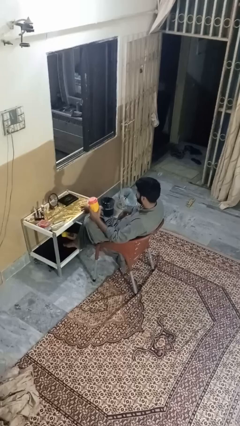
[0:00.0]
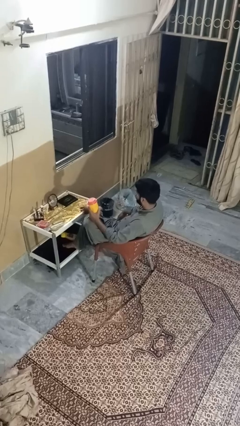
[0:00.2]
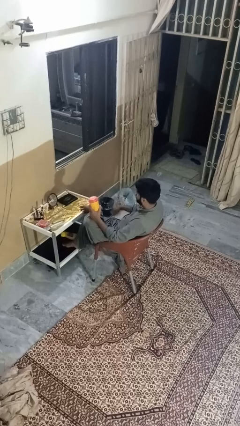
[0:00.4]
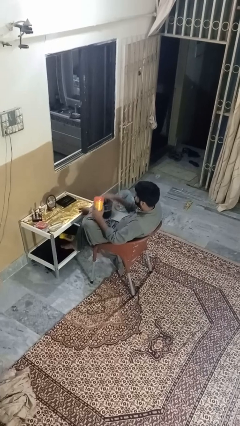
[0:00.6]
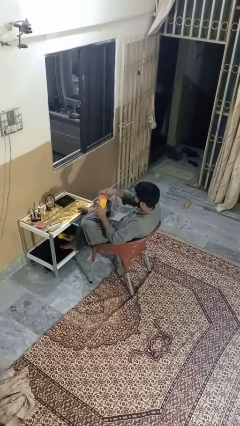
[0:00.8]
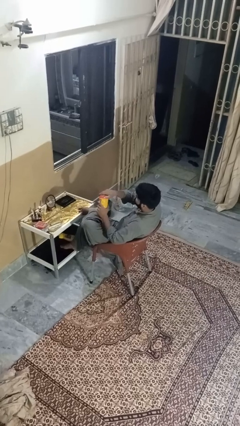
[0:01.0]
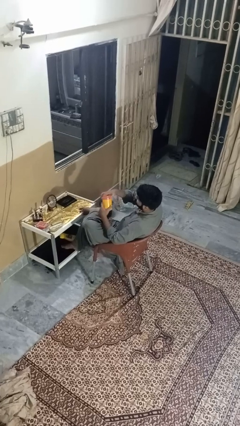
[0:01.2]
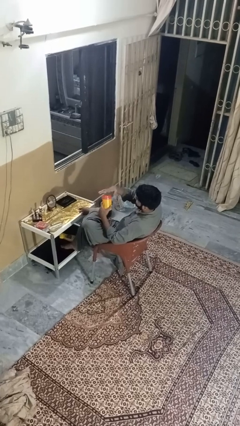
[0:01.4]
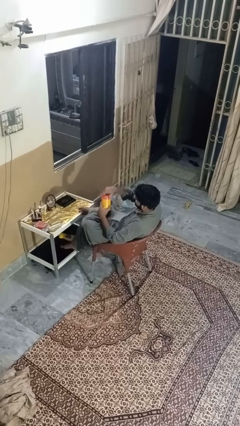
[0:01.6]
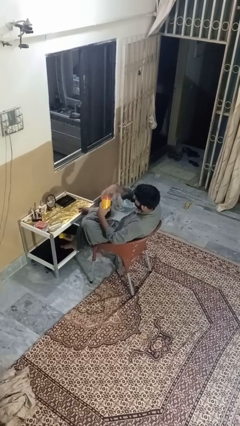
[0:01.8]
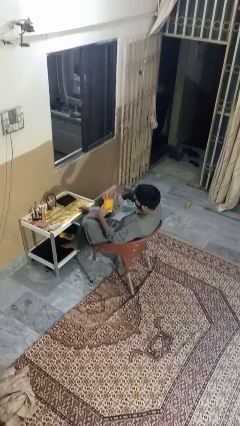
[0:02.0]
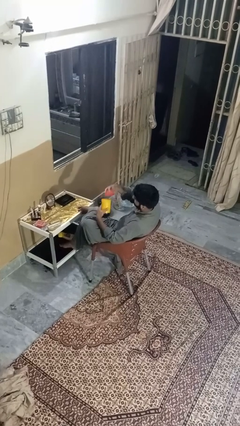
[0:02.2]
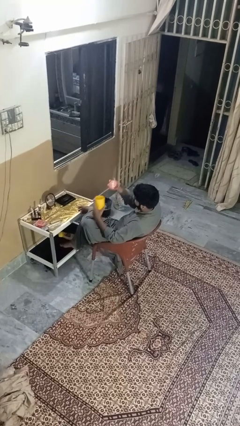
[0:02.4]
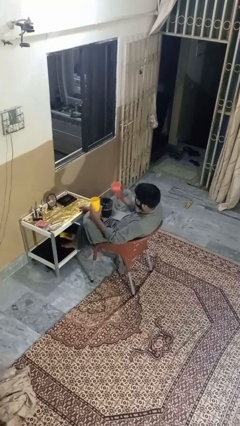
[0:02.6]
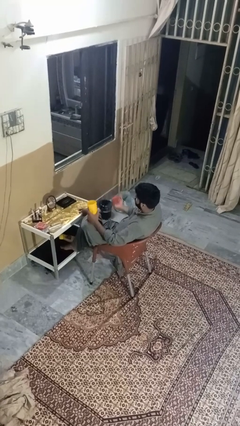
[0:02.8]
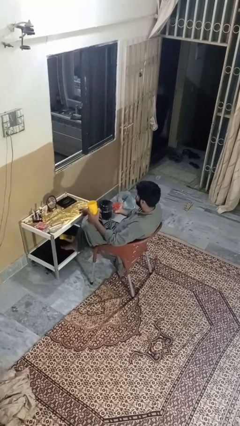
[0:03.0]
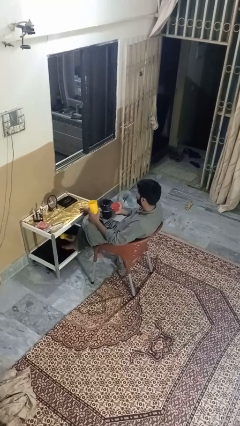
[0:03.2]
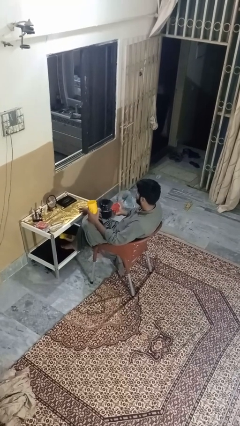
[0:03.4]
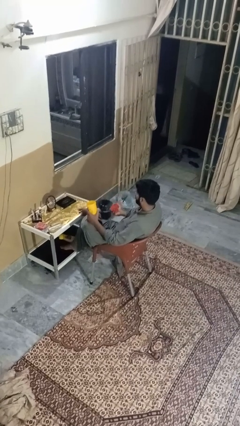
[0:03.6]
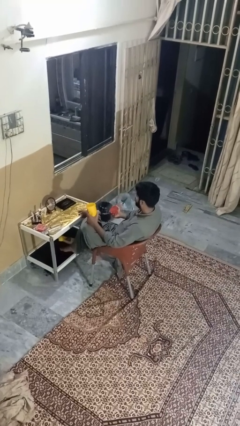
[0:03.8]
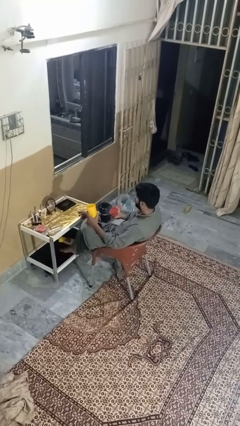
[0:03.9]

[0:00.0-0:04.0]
person opens jar

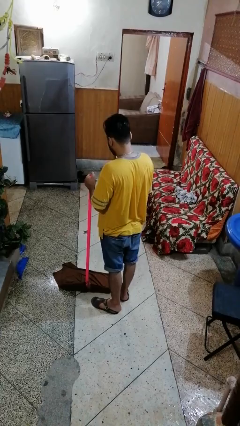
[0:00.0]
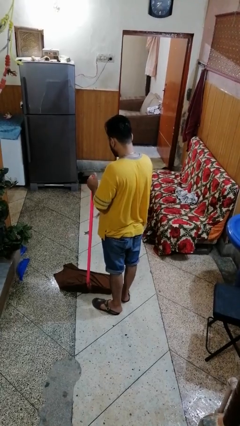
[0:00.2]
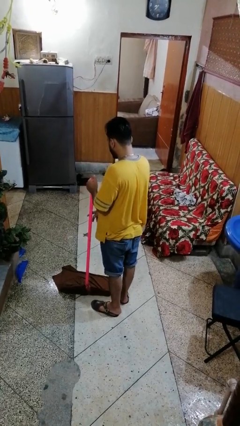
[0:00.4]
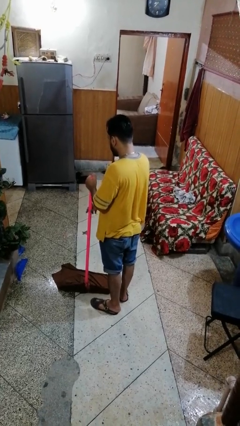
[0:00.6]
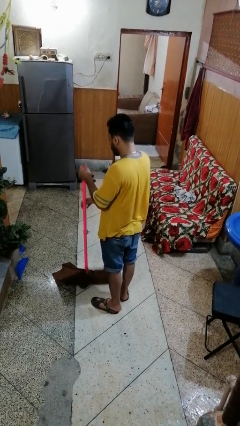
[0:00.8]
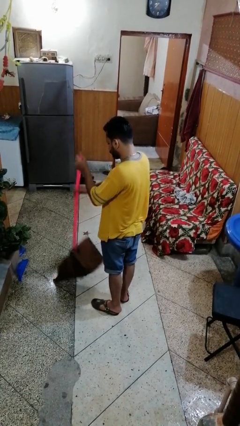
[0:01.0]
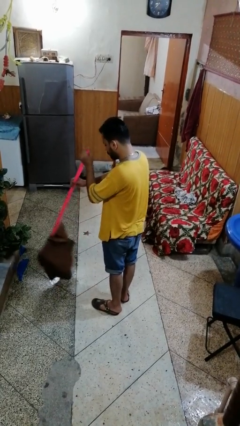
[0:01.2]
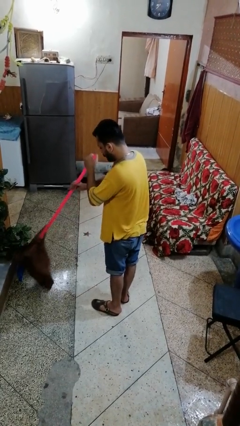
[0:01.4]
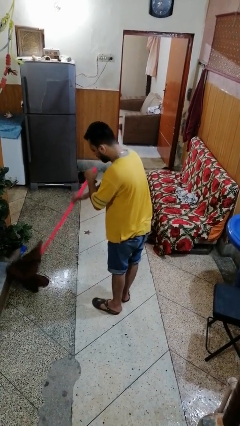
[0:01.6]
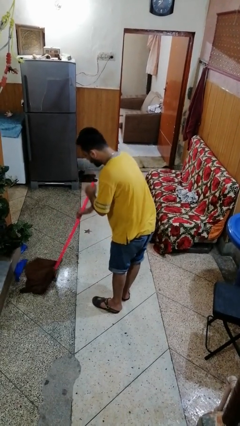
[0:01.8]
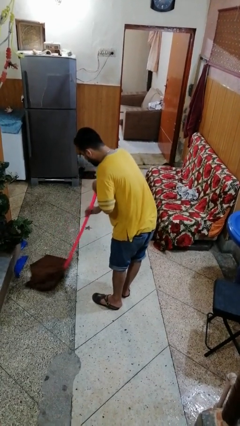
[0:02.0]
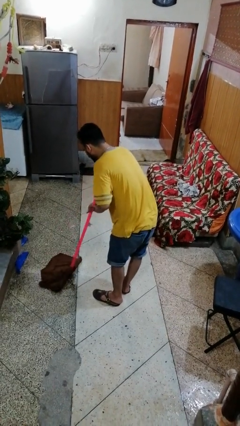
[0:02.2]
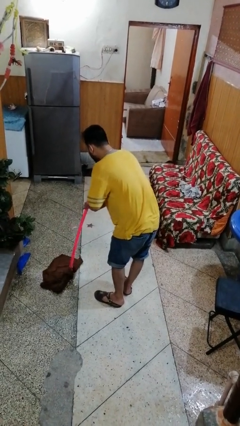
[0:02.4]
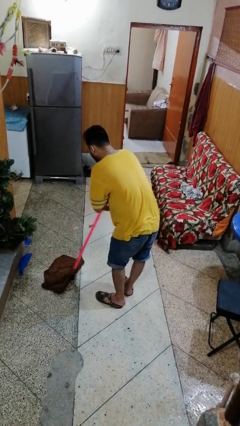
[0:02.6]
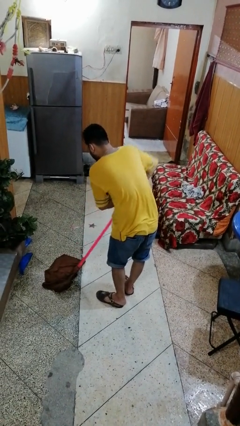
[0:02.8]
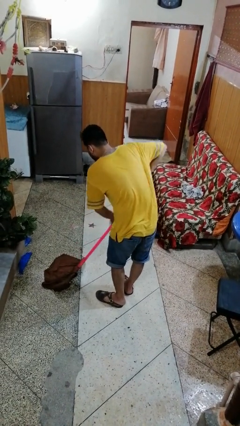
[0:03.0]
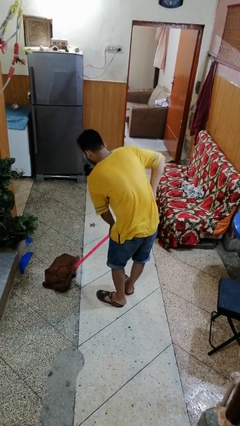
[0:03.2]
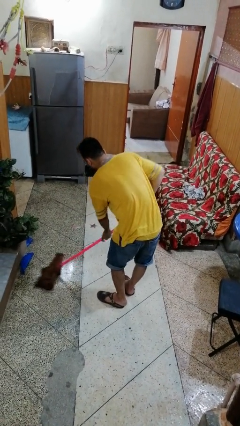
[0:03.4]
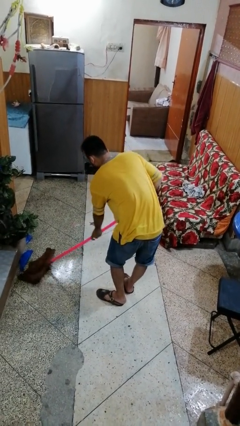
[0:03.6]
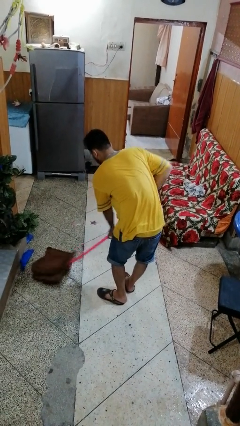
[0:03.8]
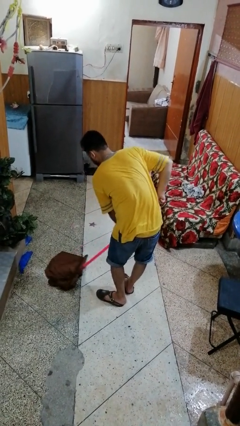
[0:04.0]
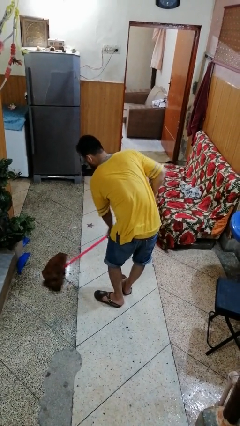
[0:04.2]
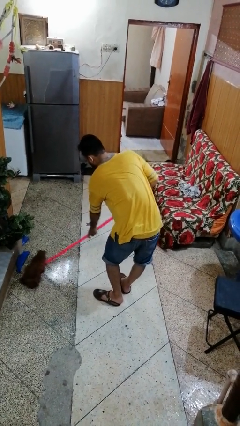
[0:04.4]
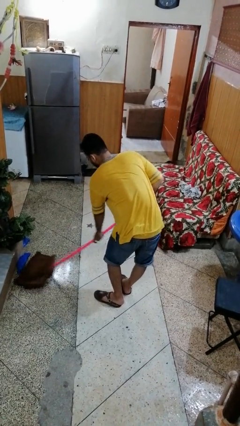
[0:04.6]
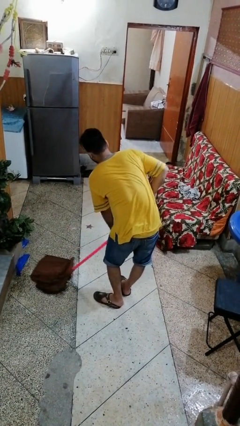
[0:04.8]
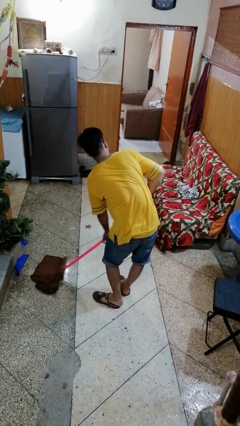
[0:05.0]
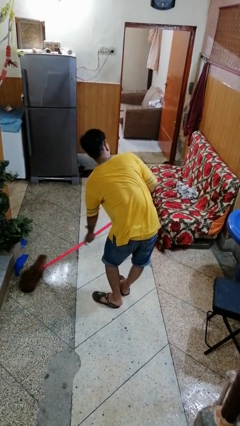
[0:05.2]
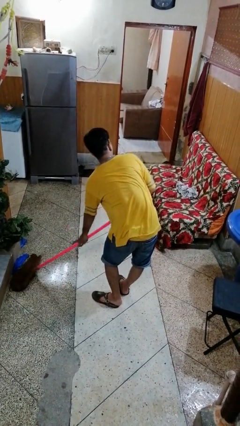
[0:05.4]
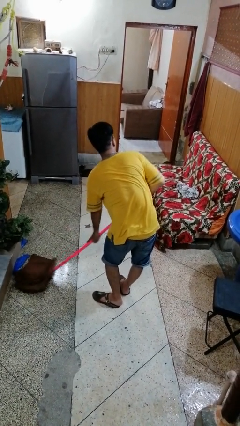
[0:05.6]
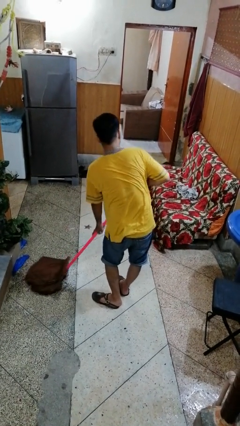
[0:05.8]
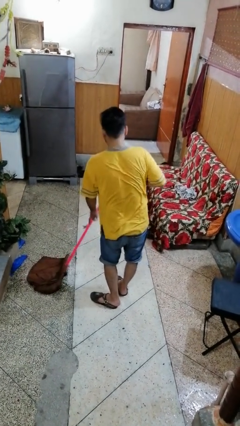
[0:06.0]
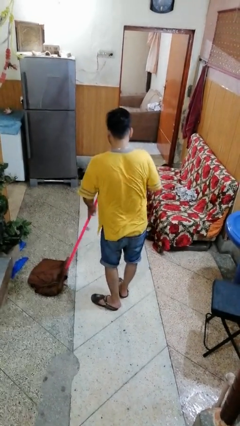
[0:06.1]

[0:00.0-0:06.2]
person mops

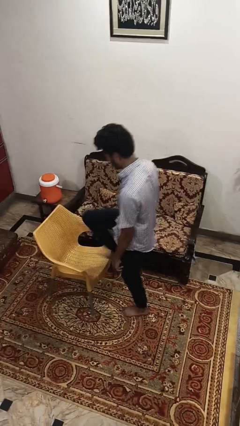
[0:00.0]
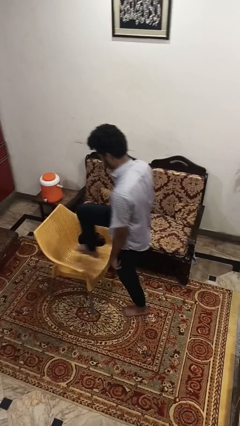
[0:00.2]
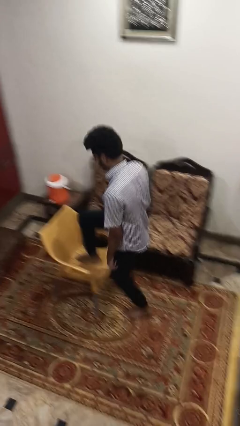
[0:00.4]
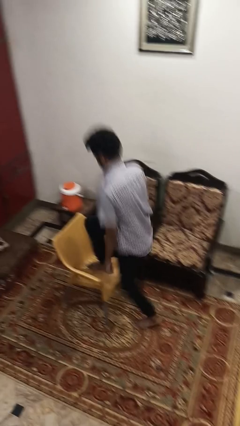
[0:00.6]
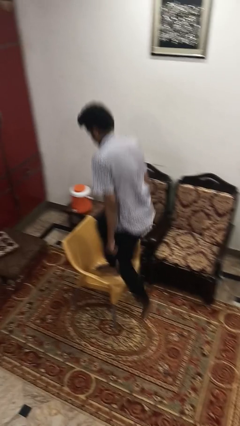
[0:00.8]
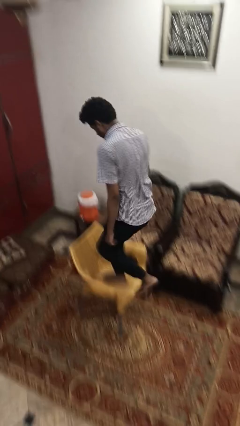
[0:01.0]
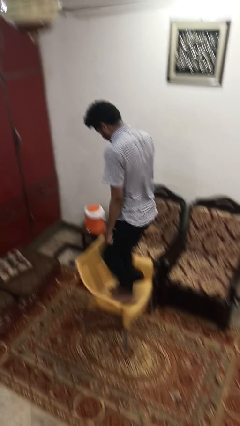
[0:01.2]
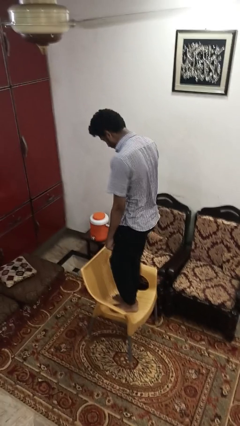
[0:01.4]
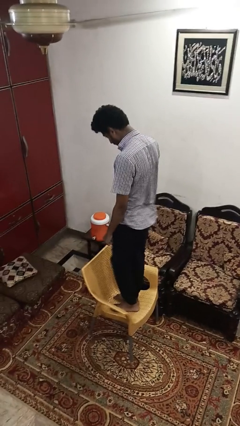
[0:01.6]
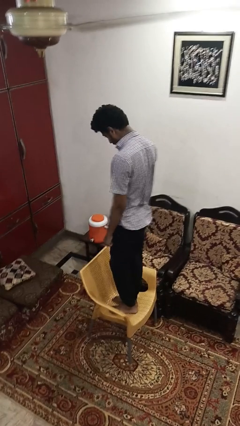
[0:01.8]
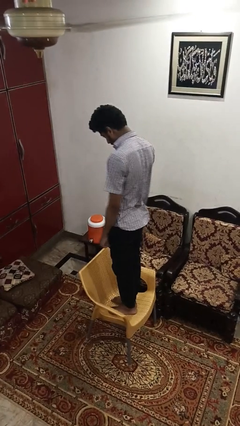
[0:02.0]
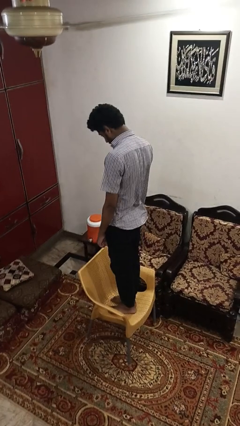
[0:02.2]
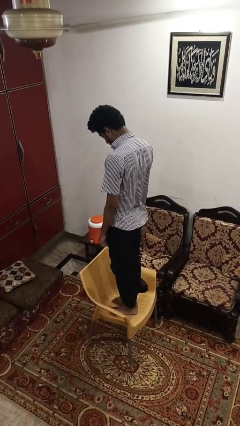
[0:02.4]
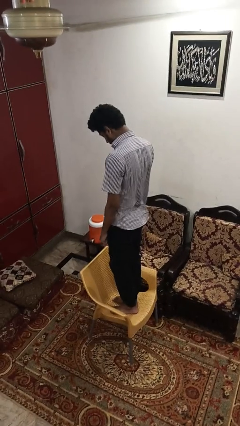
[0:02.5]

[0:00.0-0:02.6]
person climbs on chair

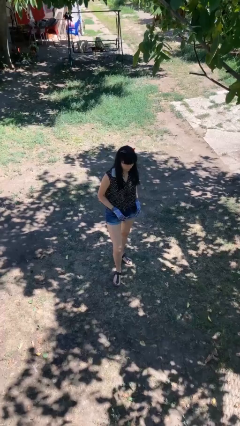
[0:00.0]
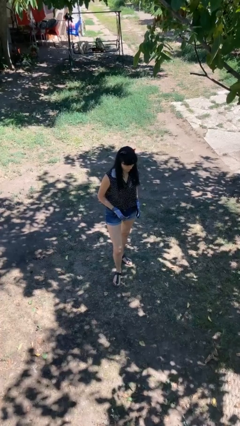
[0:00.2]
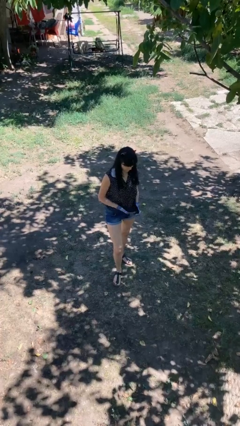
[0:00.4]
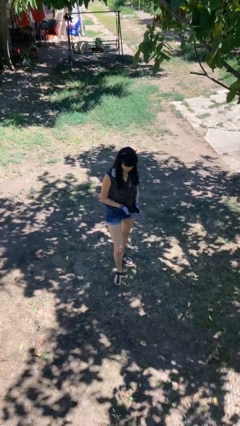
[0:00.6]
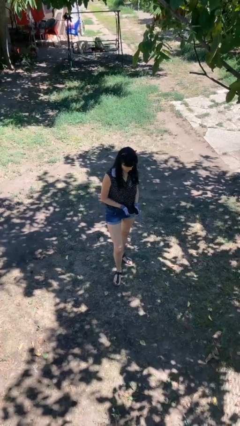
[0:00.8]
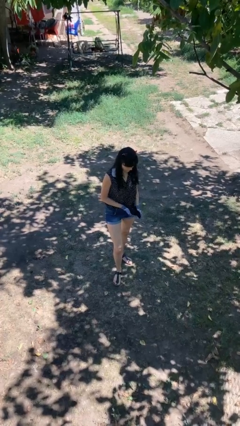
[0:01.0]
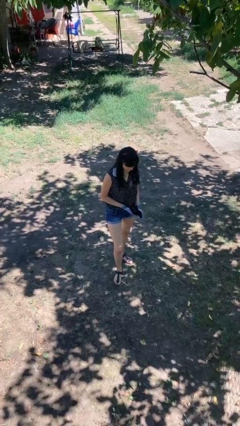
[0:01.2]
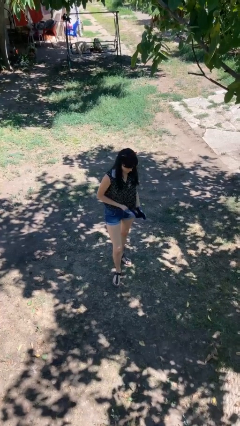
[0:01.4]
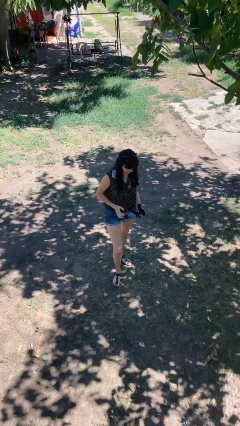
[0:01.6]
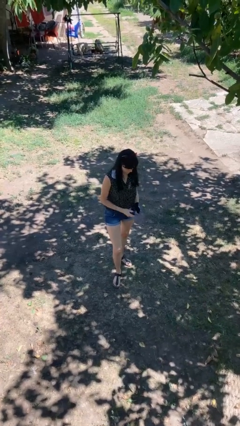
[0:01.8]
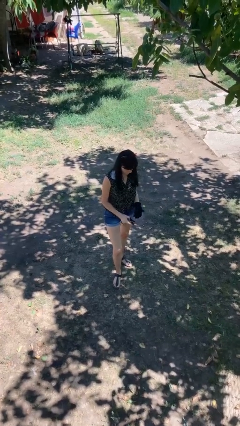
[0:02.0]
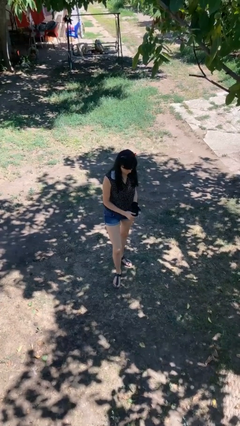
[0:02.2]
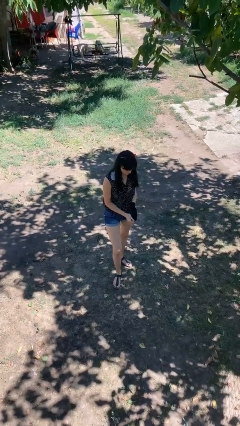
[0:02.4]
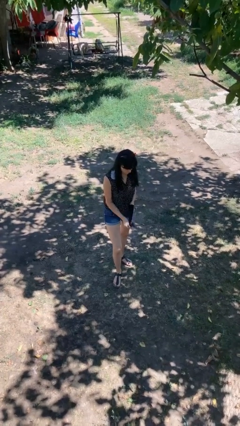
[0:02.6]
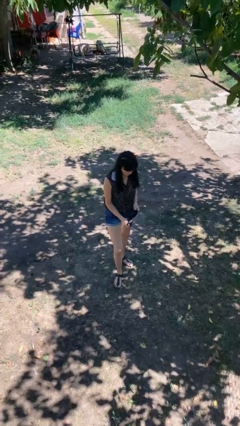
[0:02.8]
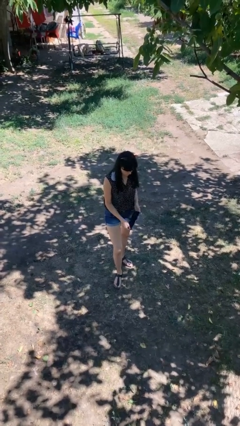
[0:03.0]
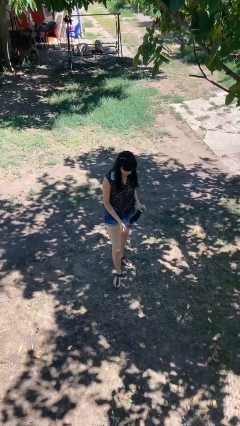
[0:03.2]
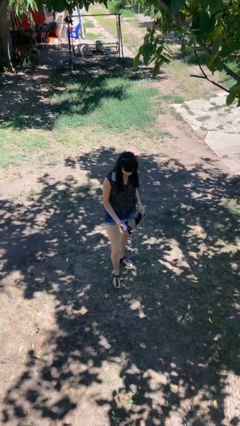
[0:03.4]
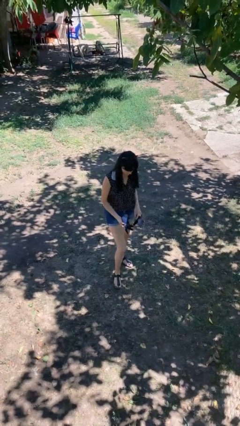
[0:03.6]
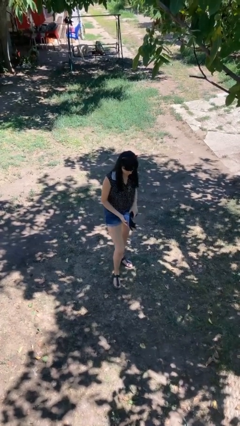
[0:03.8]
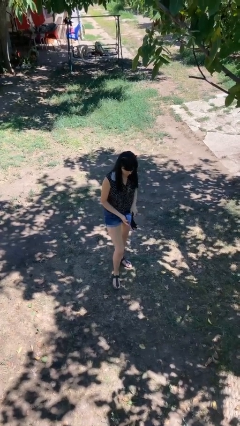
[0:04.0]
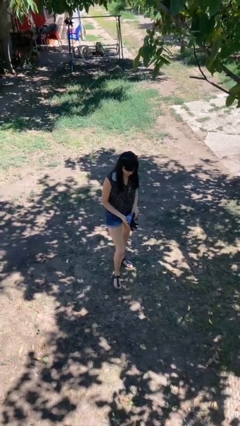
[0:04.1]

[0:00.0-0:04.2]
person takes off gloves

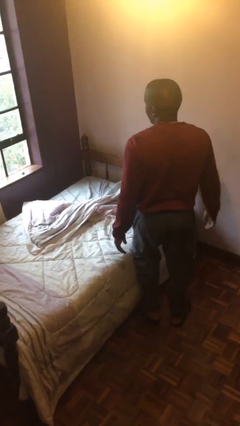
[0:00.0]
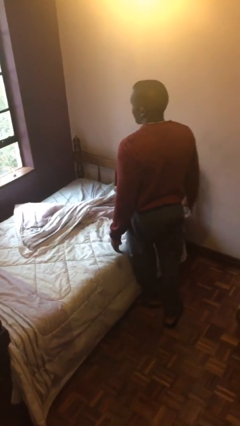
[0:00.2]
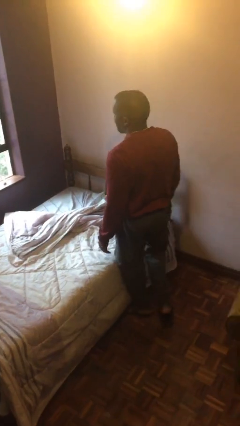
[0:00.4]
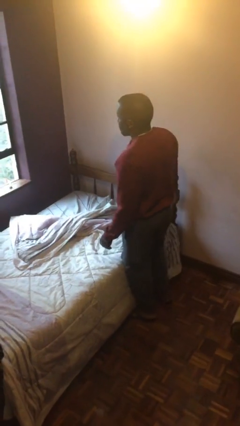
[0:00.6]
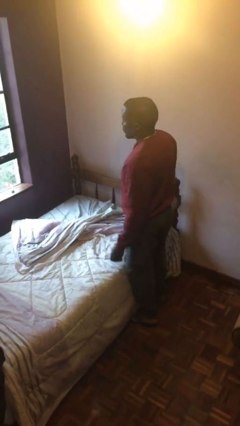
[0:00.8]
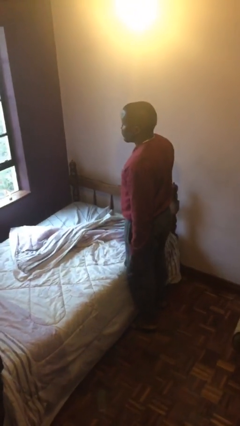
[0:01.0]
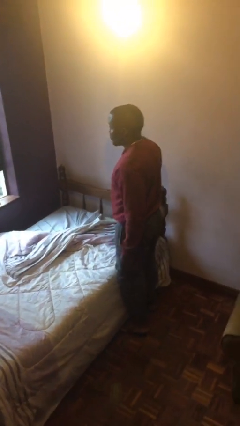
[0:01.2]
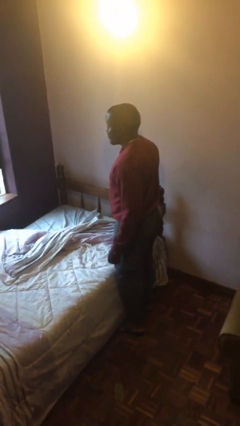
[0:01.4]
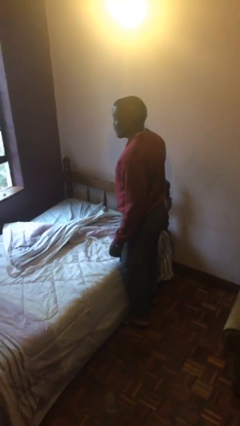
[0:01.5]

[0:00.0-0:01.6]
person makes bed
